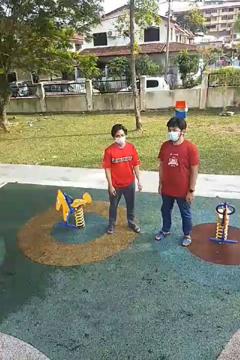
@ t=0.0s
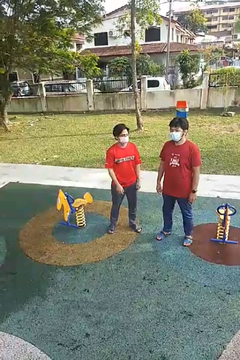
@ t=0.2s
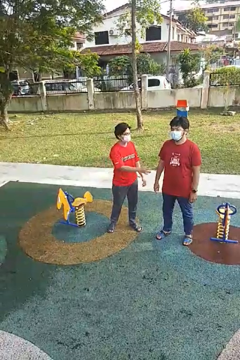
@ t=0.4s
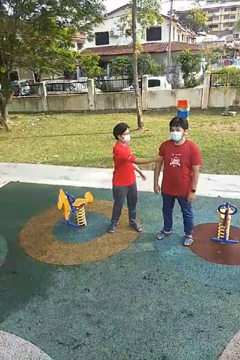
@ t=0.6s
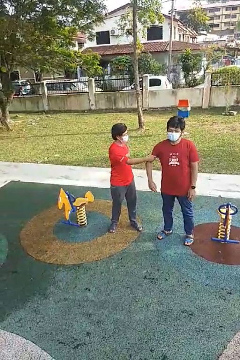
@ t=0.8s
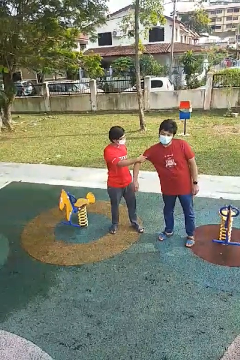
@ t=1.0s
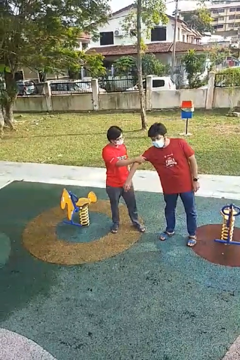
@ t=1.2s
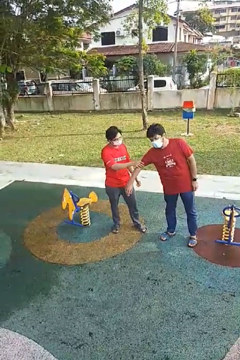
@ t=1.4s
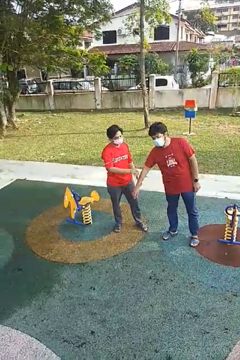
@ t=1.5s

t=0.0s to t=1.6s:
person grabs person by bicep

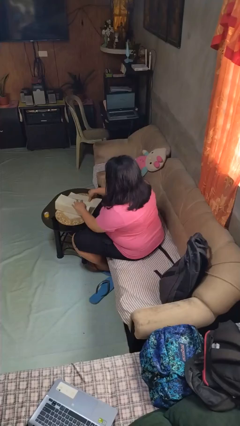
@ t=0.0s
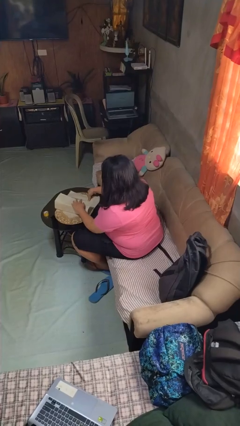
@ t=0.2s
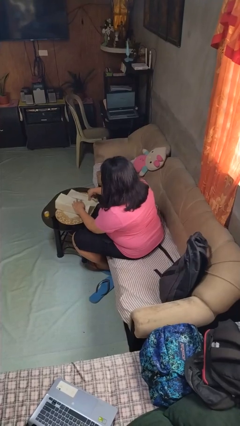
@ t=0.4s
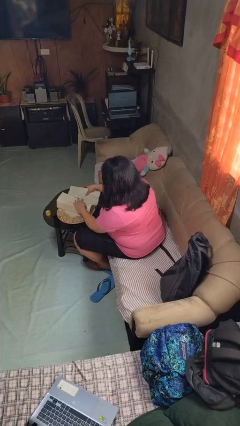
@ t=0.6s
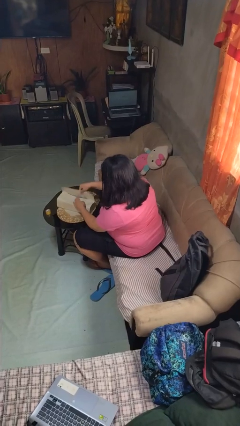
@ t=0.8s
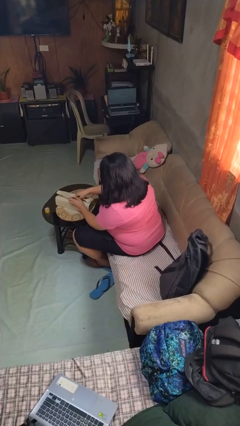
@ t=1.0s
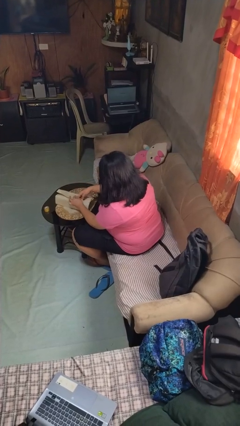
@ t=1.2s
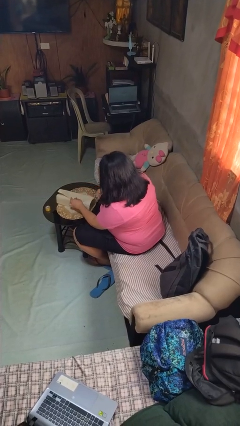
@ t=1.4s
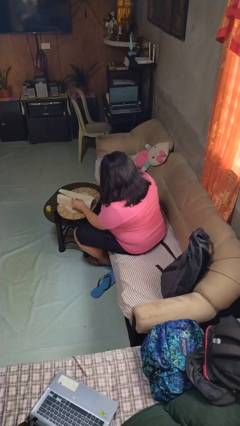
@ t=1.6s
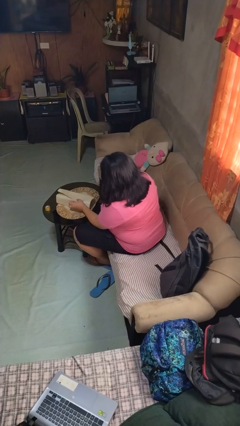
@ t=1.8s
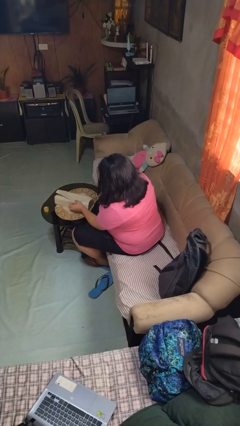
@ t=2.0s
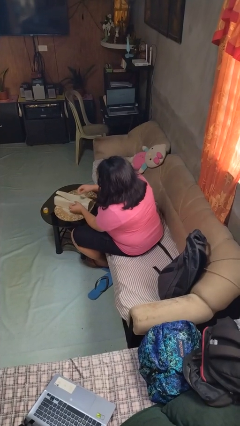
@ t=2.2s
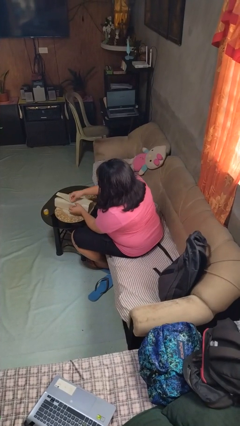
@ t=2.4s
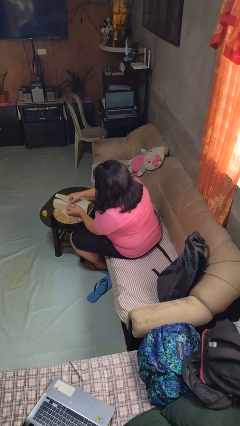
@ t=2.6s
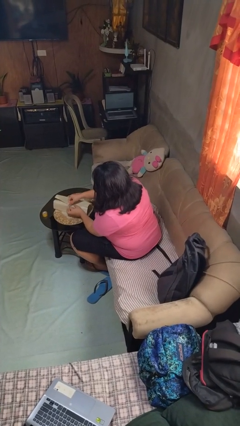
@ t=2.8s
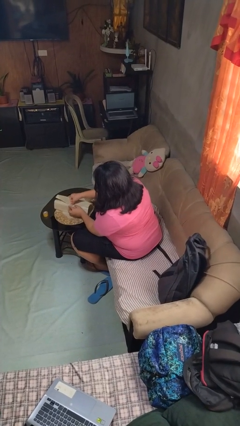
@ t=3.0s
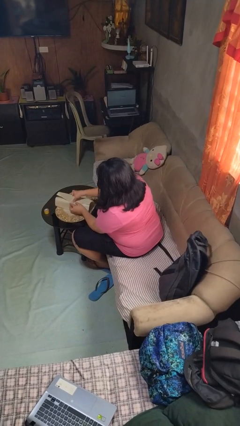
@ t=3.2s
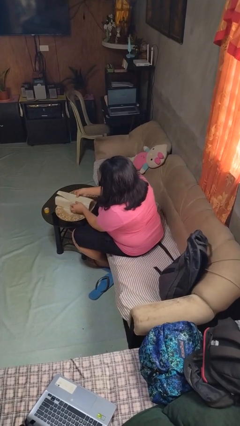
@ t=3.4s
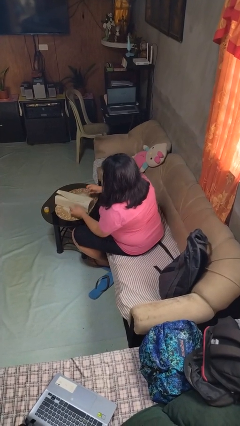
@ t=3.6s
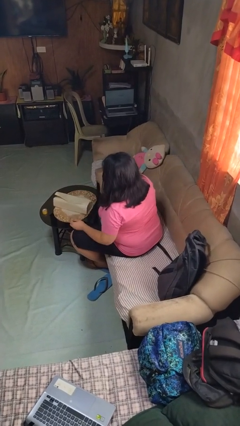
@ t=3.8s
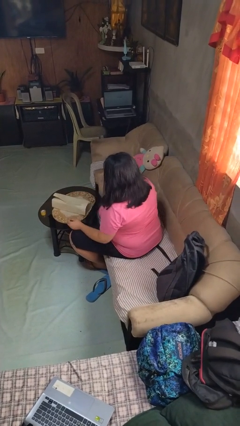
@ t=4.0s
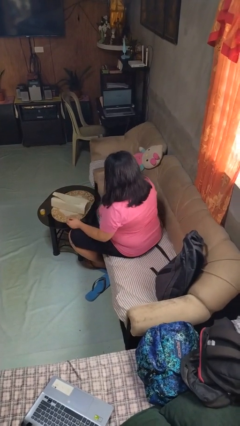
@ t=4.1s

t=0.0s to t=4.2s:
person wraps box

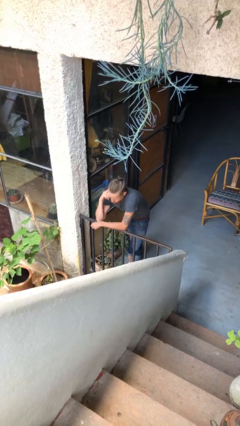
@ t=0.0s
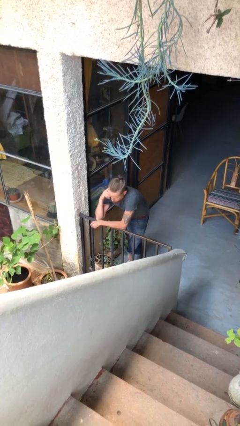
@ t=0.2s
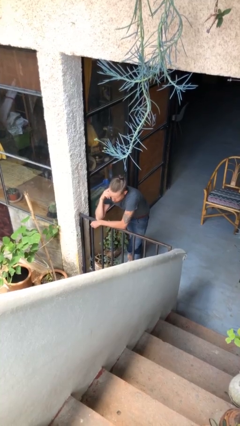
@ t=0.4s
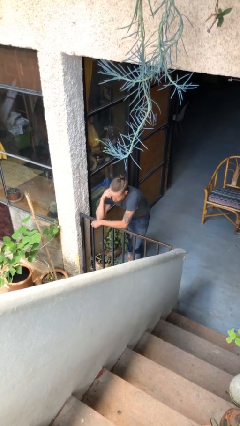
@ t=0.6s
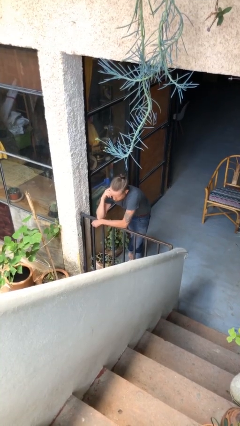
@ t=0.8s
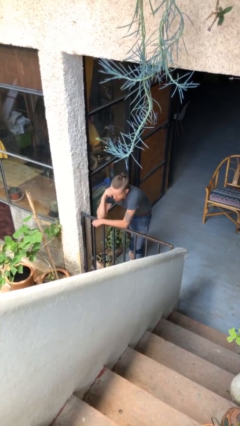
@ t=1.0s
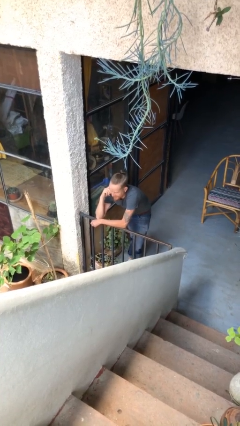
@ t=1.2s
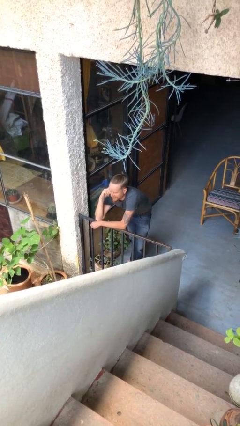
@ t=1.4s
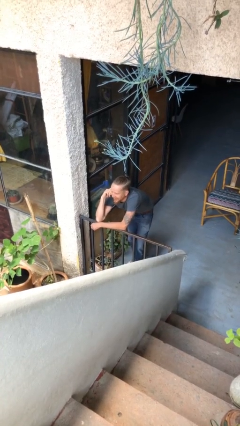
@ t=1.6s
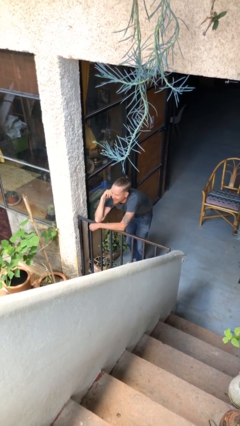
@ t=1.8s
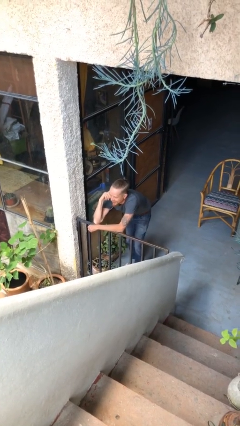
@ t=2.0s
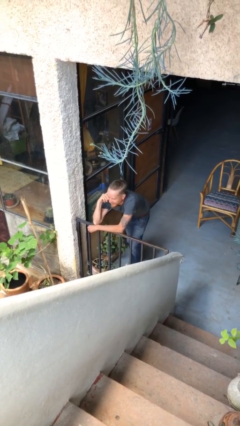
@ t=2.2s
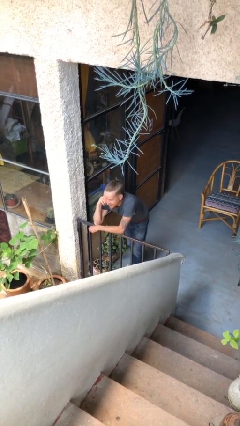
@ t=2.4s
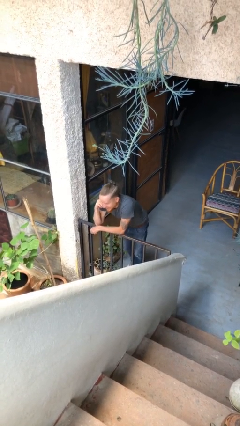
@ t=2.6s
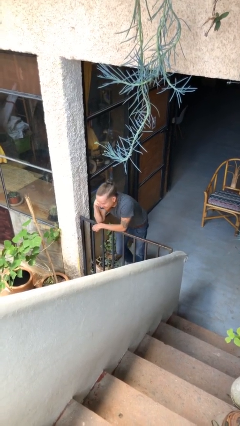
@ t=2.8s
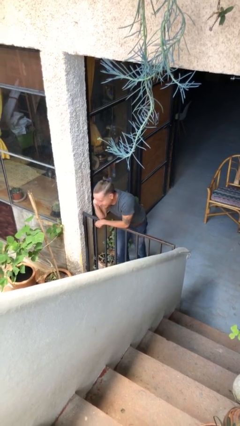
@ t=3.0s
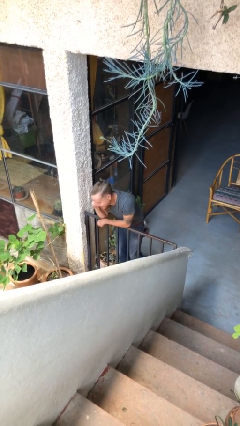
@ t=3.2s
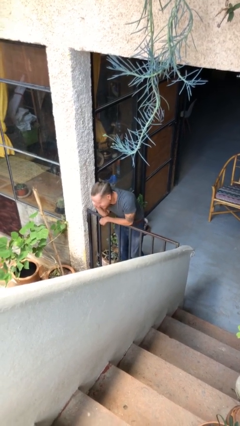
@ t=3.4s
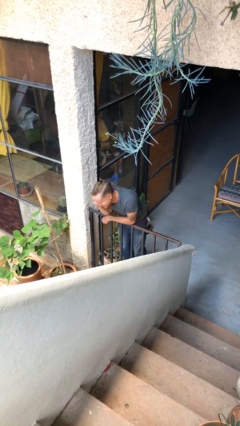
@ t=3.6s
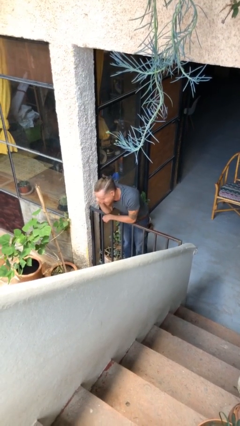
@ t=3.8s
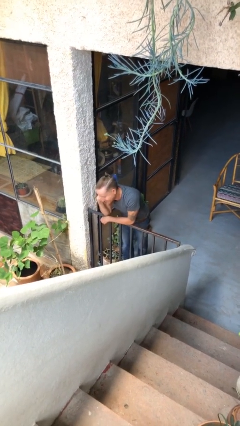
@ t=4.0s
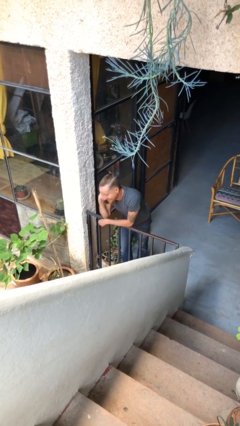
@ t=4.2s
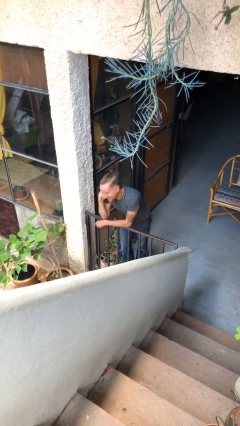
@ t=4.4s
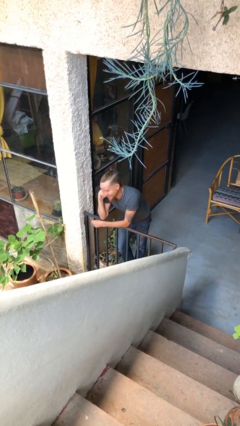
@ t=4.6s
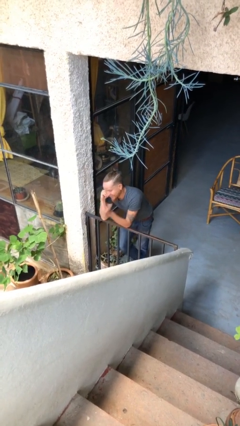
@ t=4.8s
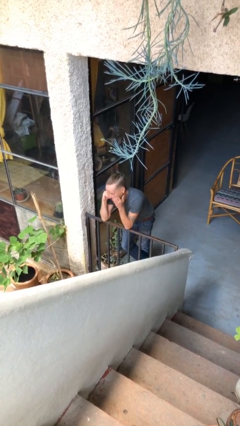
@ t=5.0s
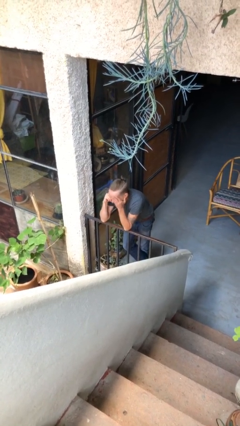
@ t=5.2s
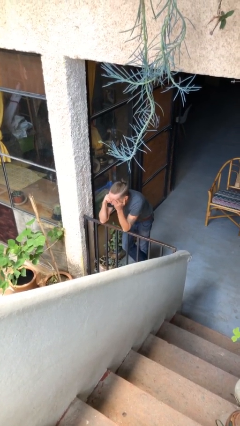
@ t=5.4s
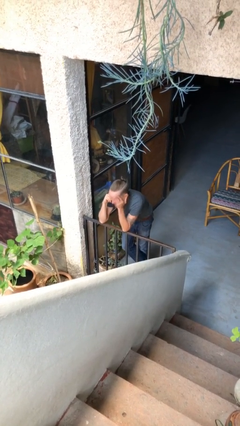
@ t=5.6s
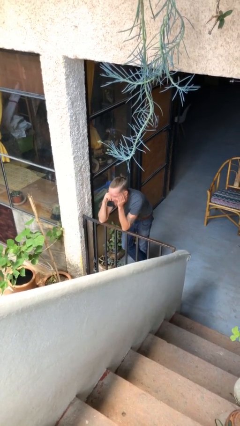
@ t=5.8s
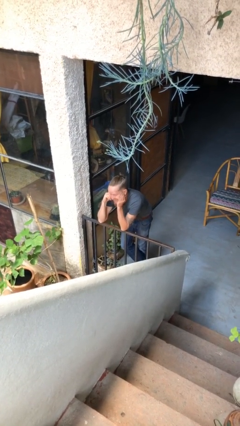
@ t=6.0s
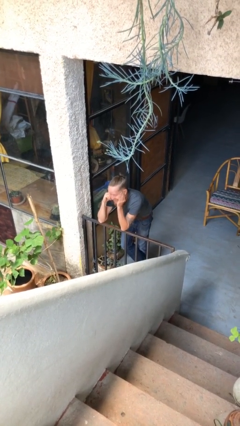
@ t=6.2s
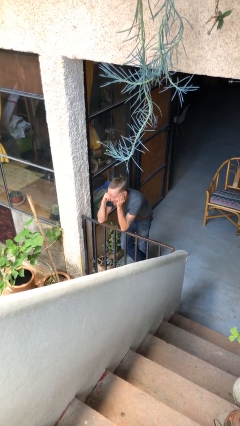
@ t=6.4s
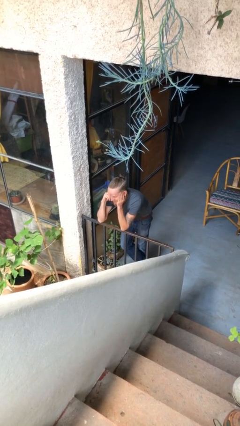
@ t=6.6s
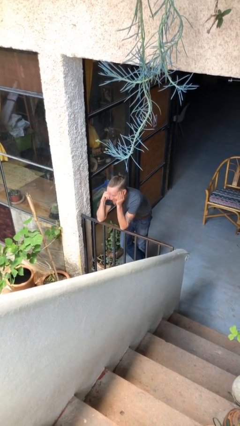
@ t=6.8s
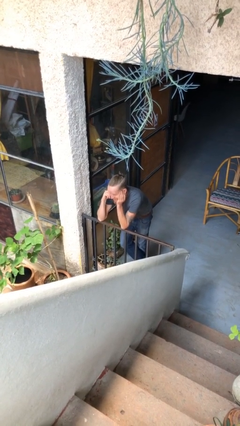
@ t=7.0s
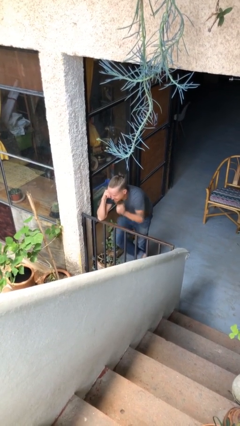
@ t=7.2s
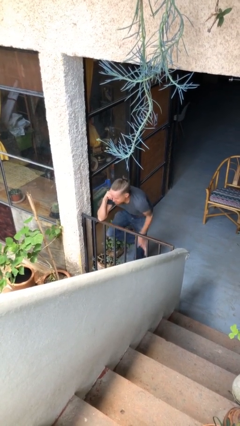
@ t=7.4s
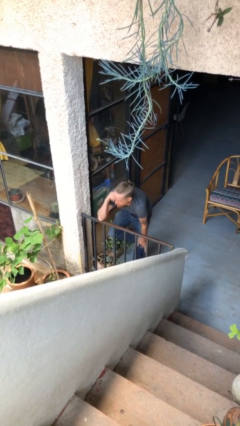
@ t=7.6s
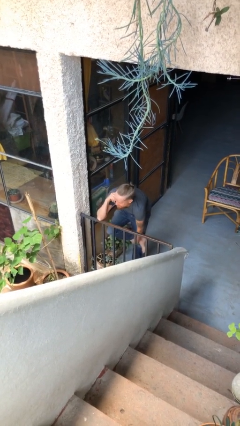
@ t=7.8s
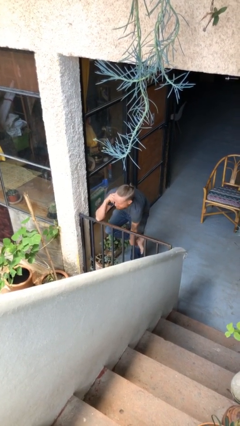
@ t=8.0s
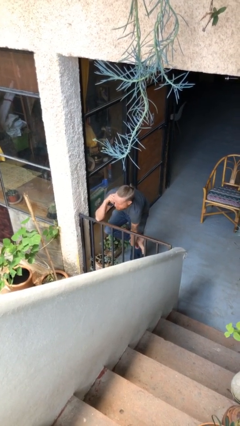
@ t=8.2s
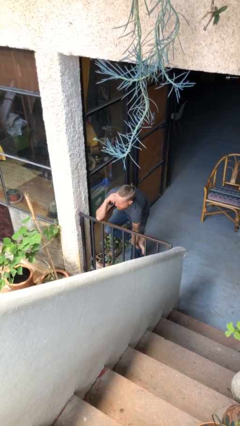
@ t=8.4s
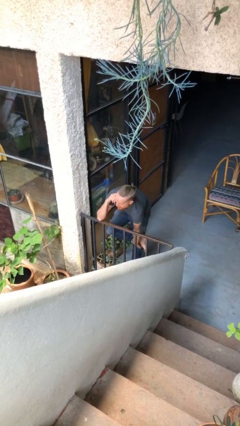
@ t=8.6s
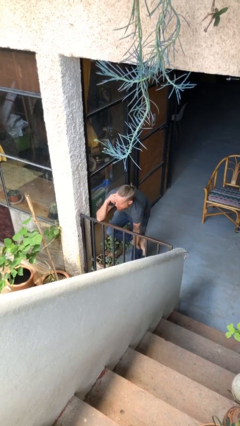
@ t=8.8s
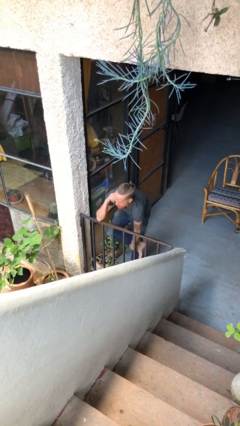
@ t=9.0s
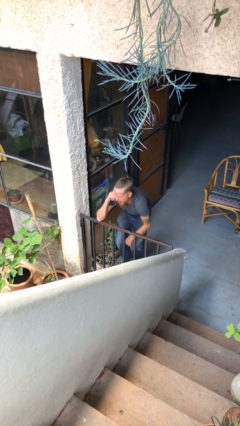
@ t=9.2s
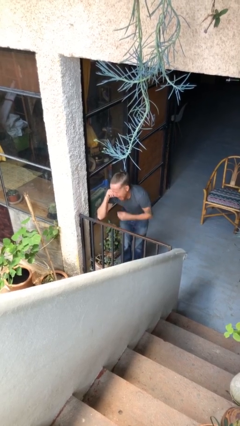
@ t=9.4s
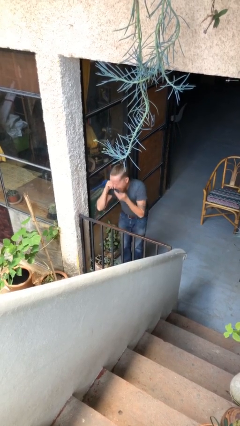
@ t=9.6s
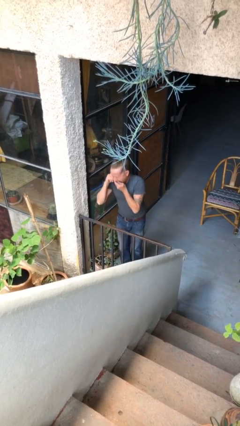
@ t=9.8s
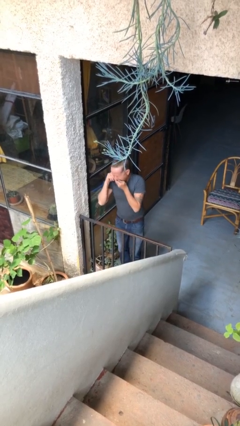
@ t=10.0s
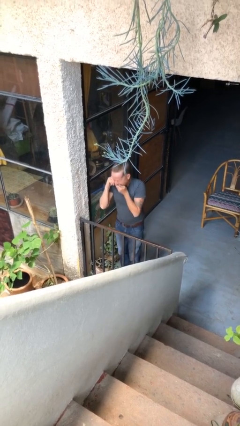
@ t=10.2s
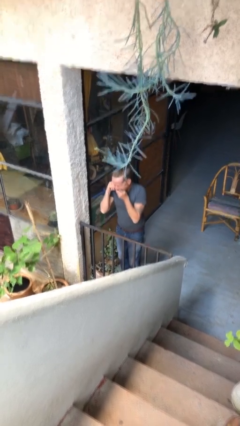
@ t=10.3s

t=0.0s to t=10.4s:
person talks on phone

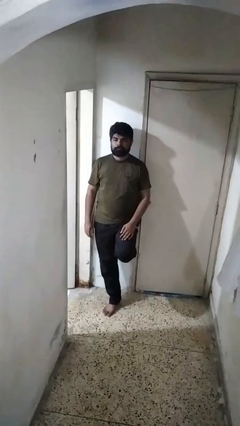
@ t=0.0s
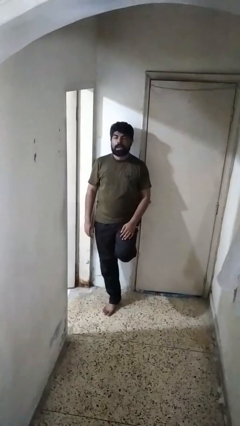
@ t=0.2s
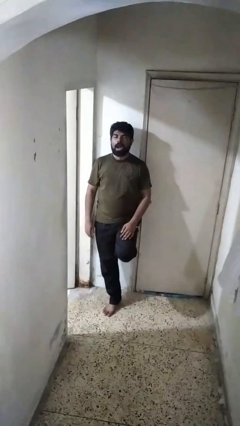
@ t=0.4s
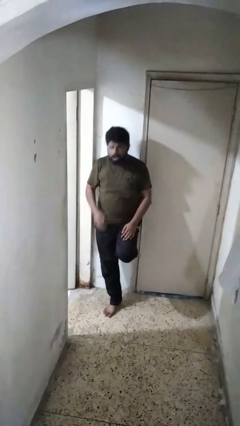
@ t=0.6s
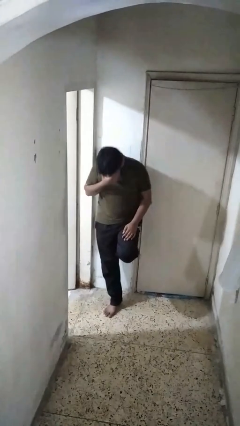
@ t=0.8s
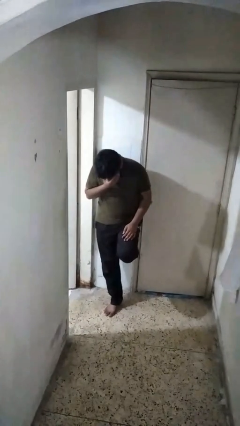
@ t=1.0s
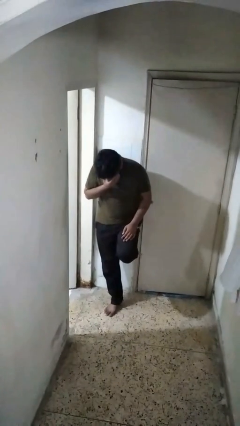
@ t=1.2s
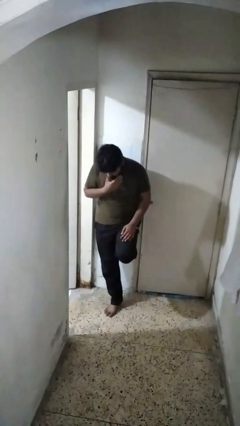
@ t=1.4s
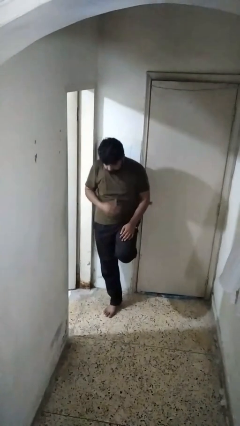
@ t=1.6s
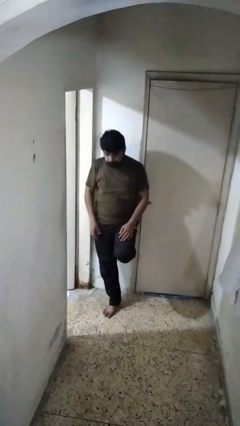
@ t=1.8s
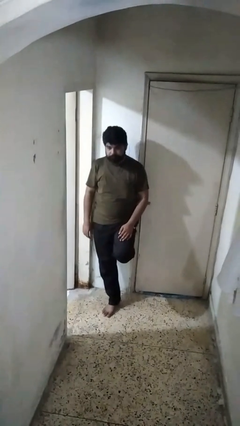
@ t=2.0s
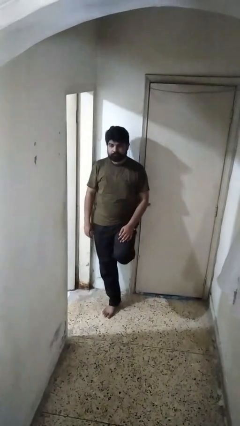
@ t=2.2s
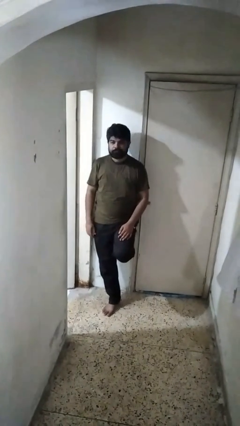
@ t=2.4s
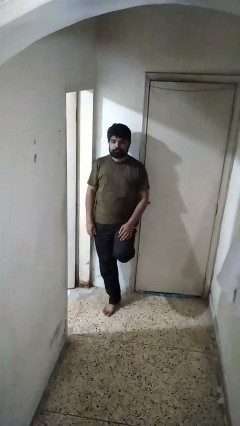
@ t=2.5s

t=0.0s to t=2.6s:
person sneezes into hand
